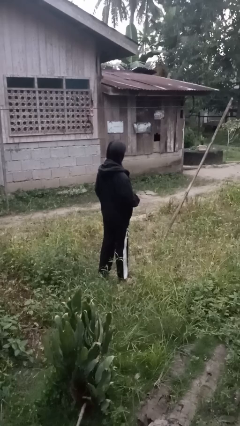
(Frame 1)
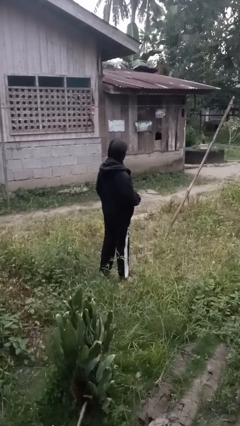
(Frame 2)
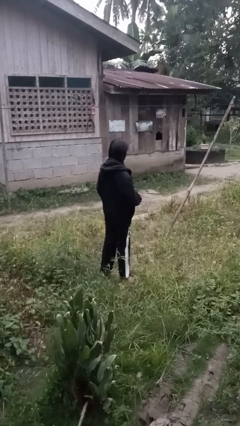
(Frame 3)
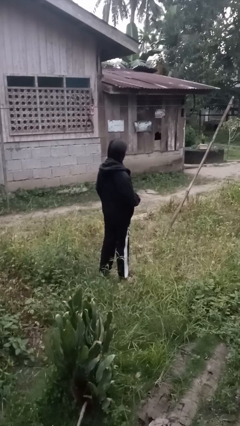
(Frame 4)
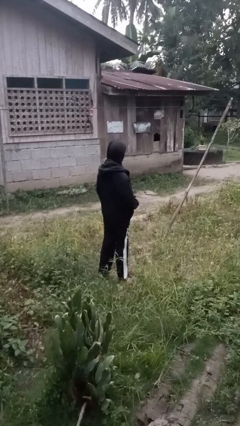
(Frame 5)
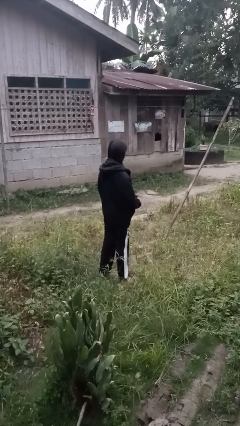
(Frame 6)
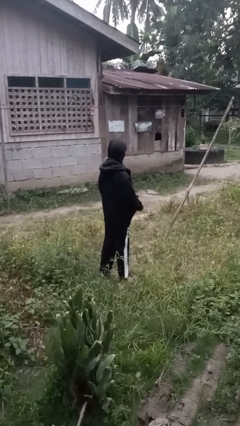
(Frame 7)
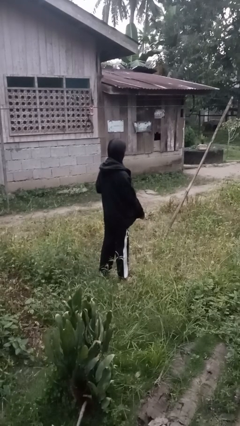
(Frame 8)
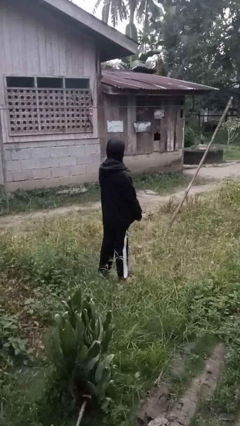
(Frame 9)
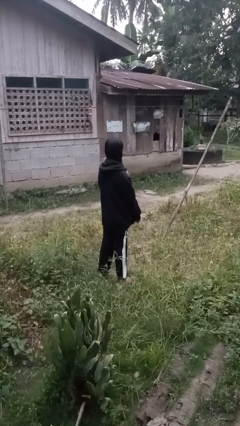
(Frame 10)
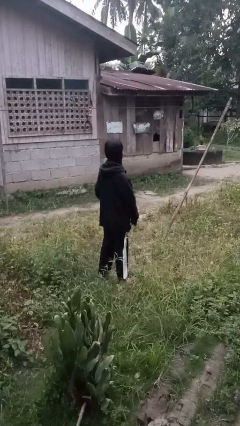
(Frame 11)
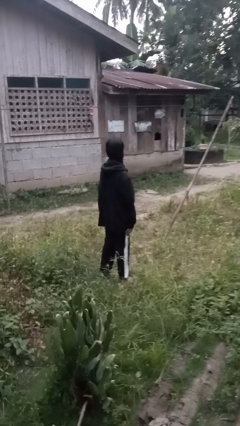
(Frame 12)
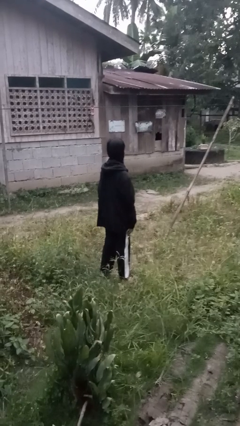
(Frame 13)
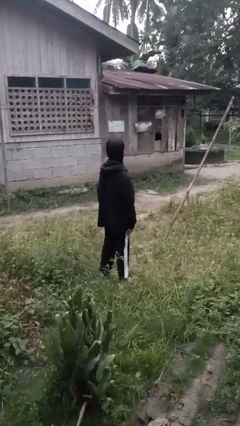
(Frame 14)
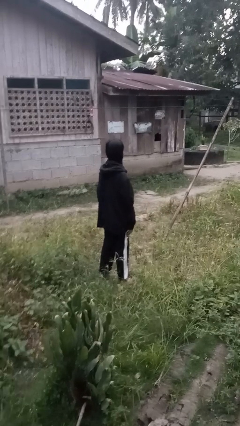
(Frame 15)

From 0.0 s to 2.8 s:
person zips up jacket

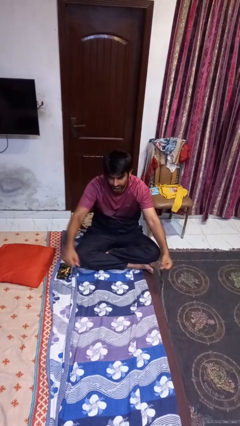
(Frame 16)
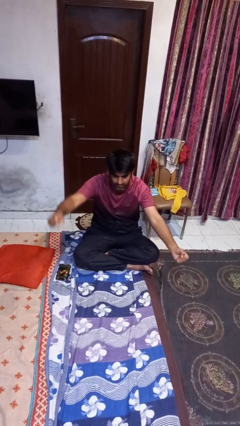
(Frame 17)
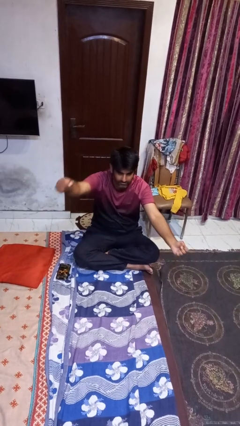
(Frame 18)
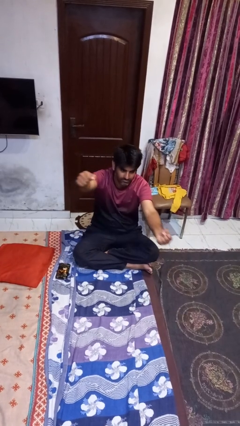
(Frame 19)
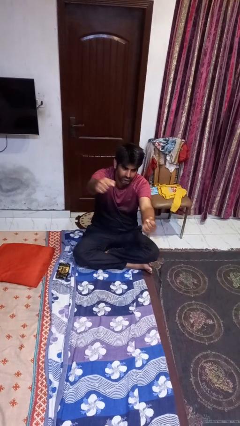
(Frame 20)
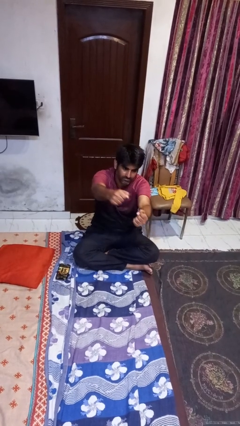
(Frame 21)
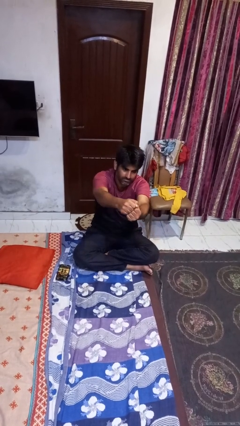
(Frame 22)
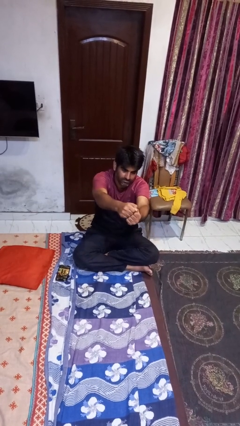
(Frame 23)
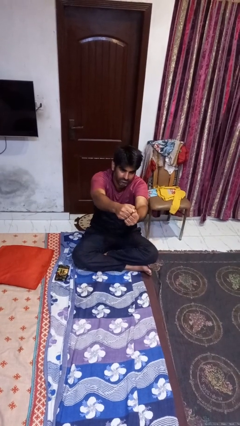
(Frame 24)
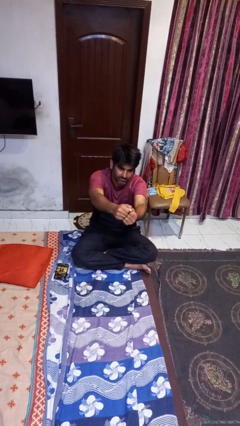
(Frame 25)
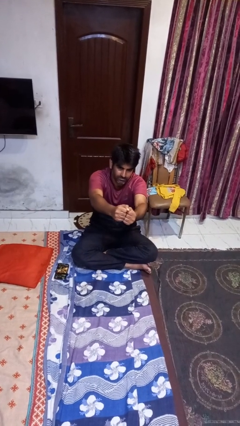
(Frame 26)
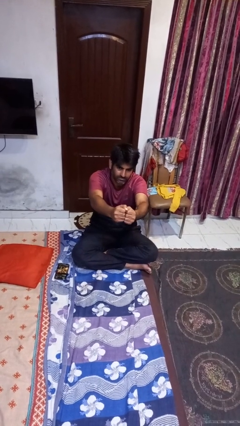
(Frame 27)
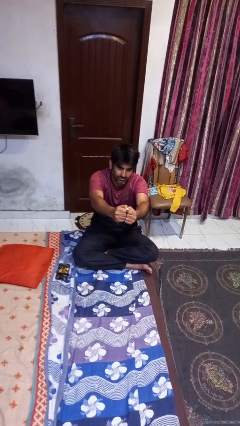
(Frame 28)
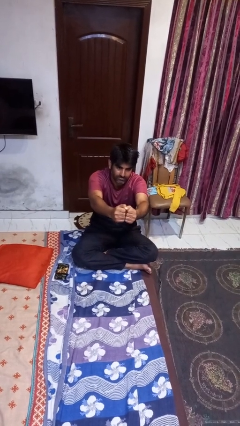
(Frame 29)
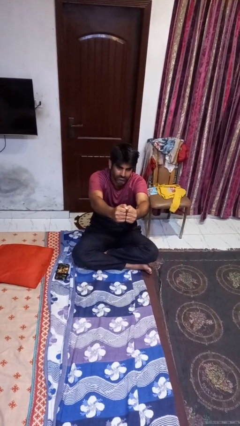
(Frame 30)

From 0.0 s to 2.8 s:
person gestures zoom in

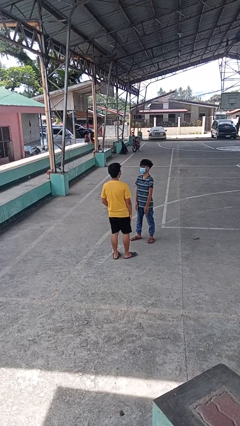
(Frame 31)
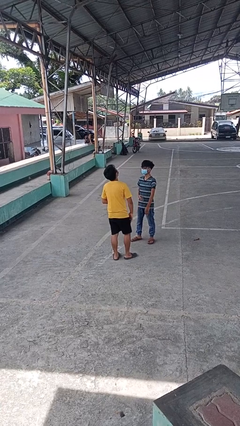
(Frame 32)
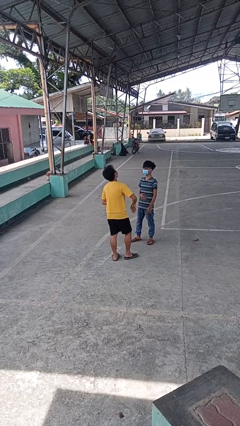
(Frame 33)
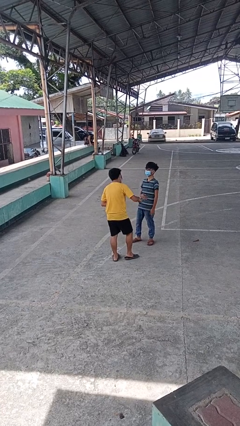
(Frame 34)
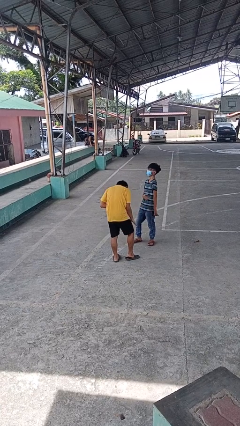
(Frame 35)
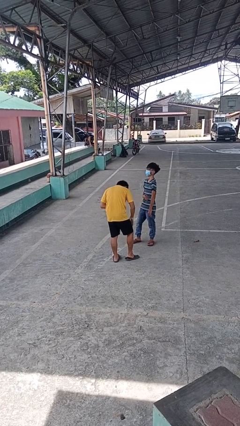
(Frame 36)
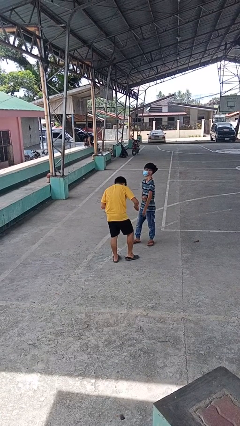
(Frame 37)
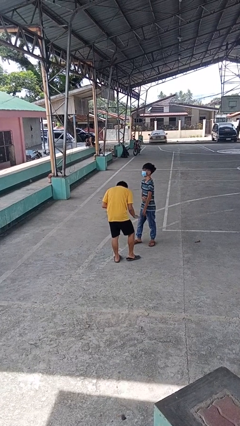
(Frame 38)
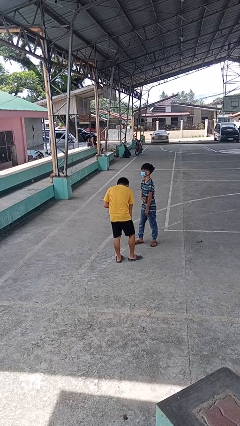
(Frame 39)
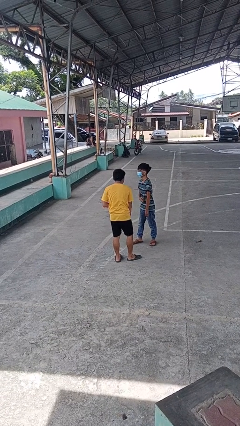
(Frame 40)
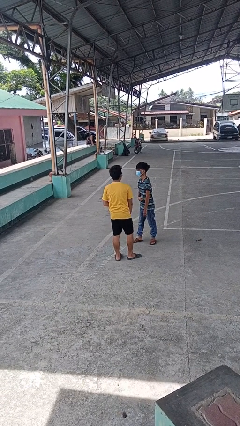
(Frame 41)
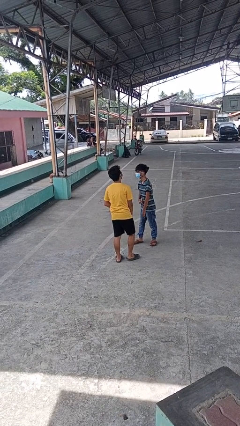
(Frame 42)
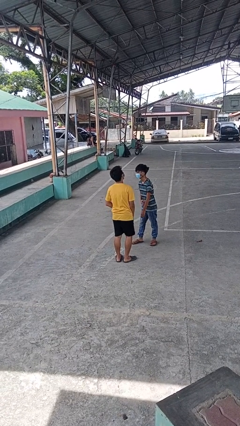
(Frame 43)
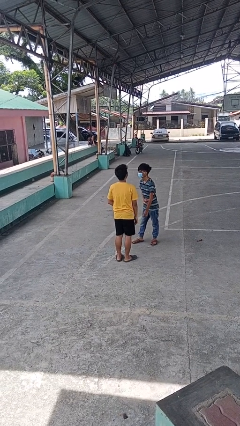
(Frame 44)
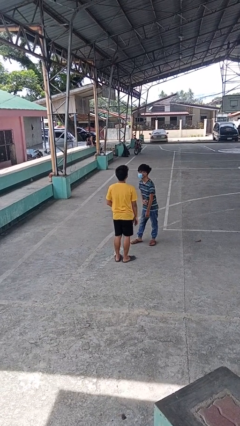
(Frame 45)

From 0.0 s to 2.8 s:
person laughs with person

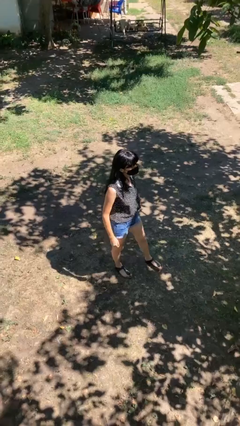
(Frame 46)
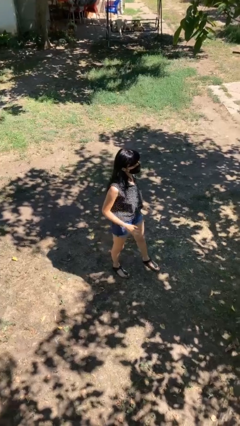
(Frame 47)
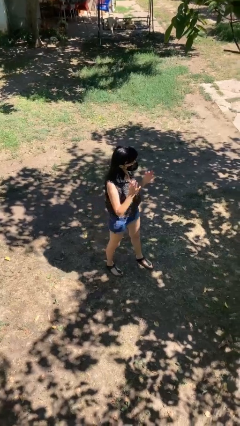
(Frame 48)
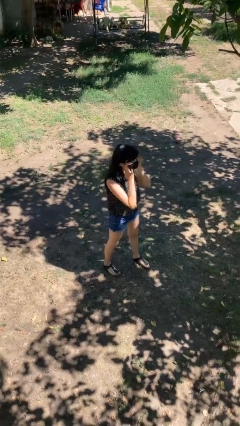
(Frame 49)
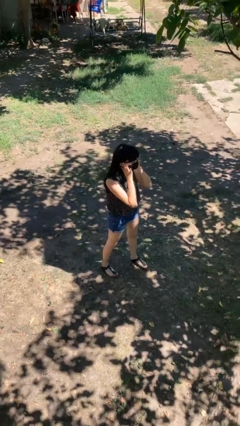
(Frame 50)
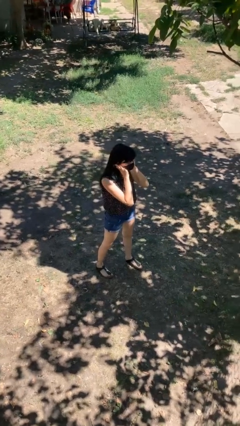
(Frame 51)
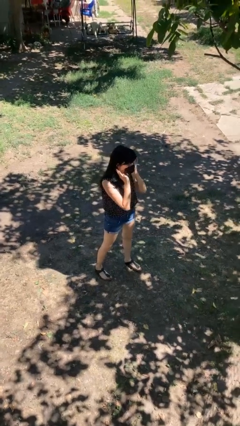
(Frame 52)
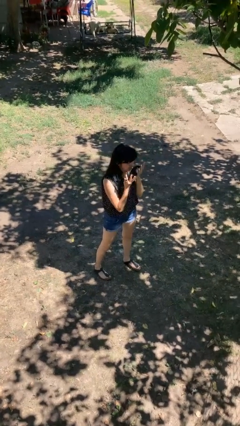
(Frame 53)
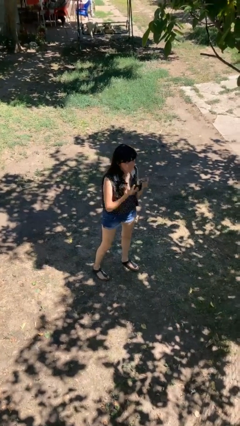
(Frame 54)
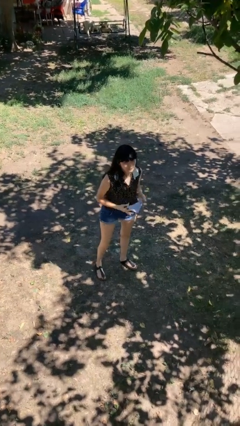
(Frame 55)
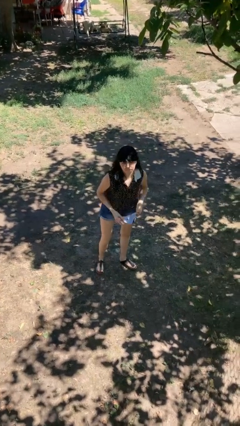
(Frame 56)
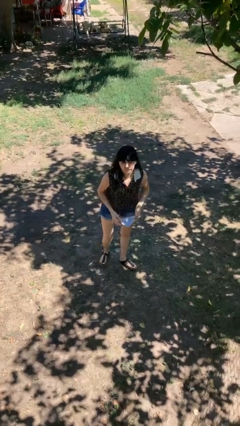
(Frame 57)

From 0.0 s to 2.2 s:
person takes off facemask

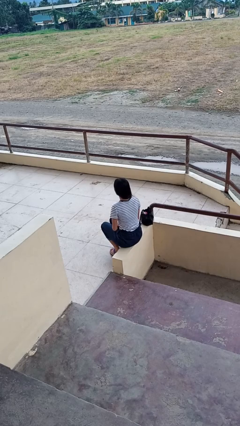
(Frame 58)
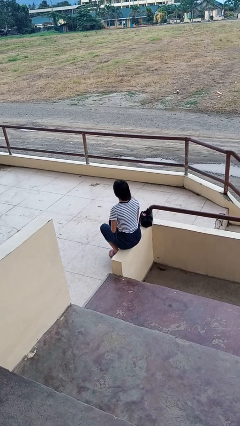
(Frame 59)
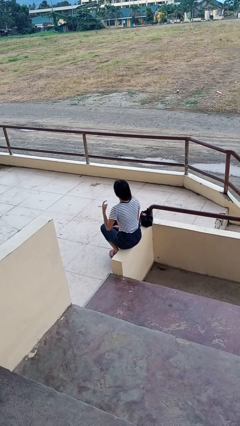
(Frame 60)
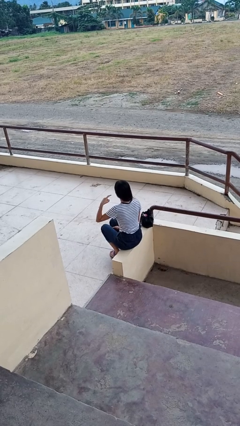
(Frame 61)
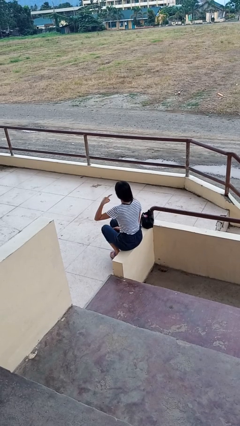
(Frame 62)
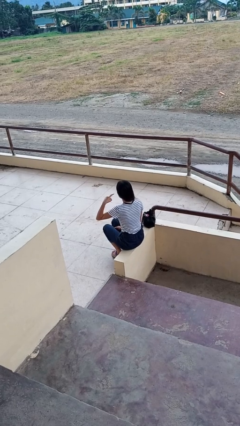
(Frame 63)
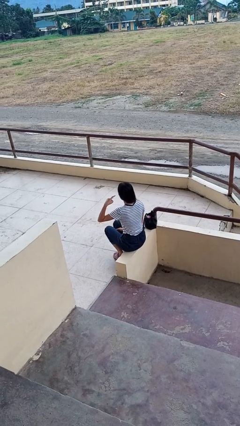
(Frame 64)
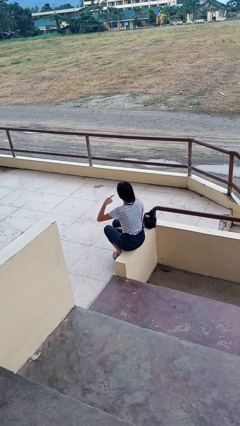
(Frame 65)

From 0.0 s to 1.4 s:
person gestures listen closely

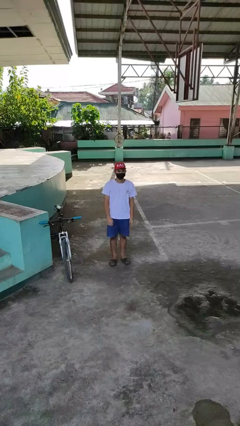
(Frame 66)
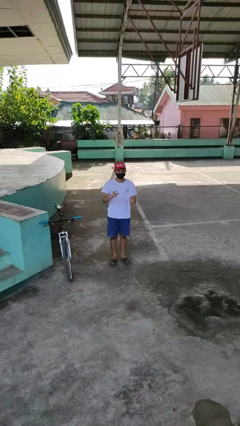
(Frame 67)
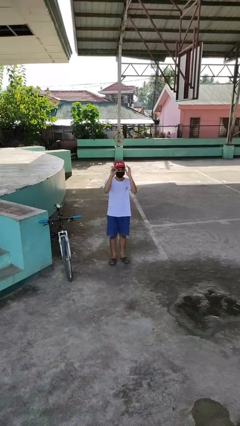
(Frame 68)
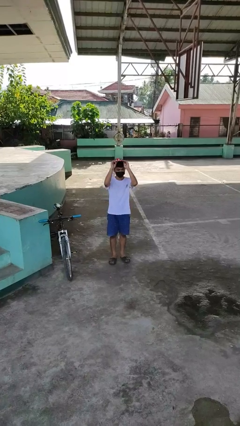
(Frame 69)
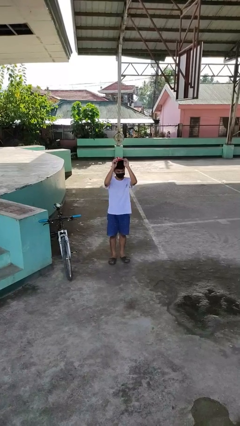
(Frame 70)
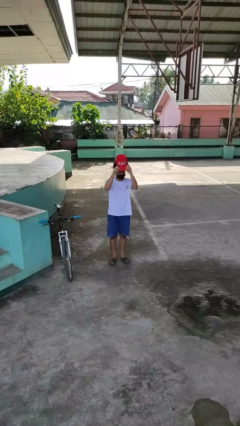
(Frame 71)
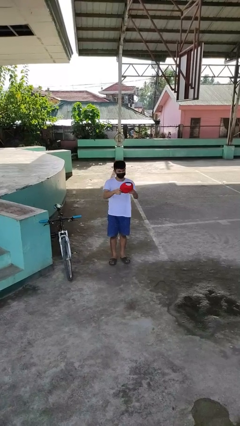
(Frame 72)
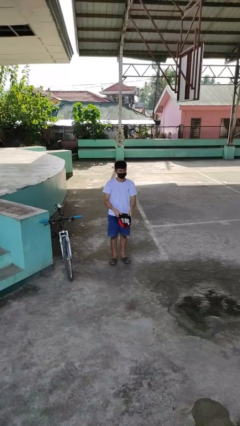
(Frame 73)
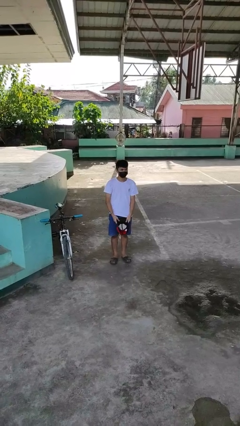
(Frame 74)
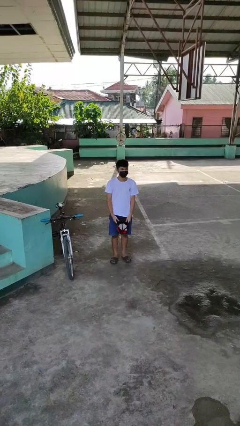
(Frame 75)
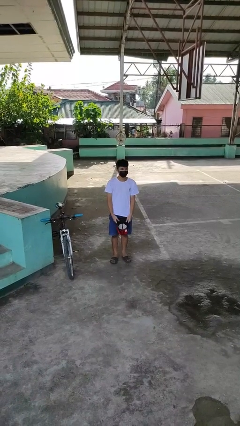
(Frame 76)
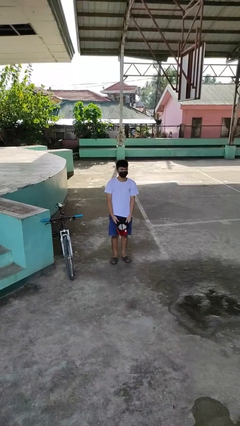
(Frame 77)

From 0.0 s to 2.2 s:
person takes off hat

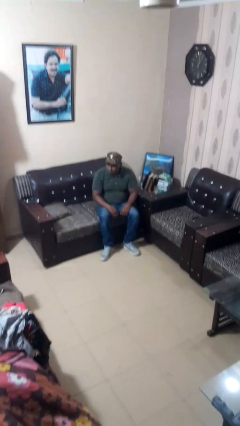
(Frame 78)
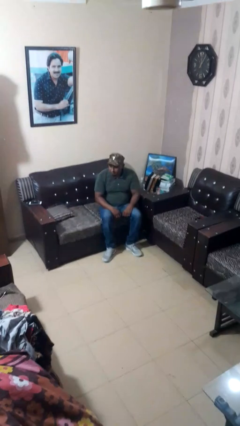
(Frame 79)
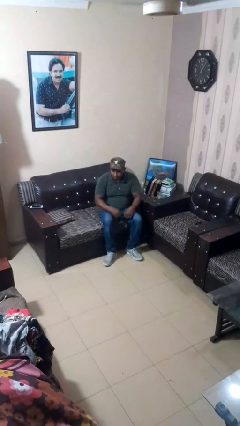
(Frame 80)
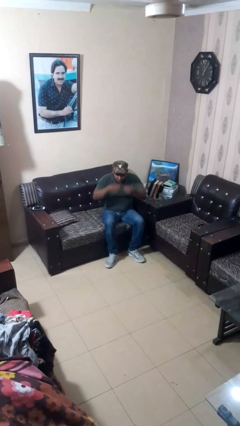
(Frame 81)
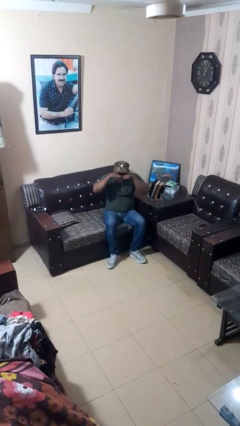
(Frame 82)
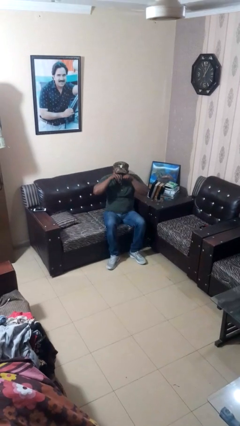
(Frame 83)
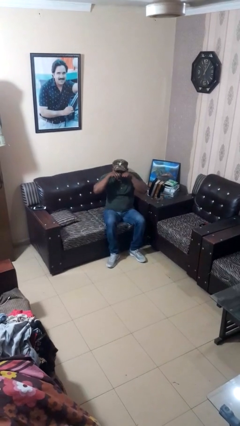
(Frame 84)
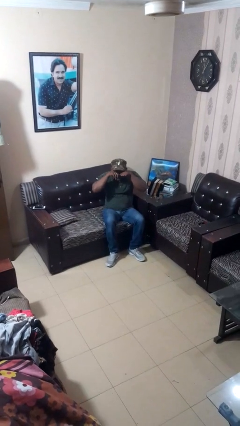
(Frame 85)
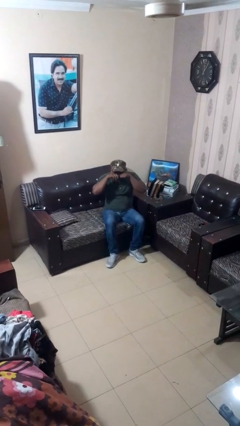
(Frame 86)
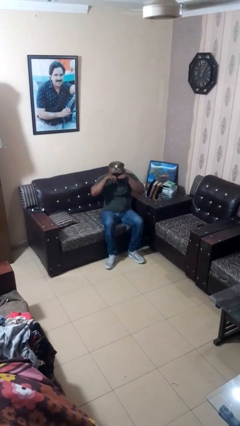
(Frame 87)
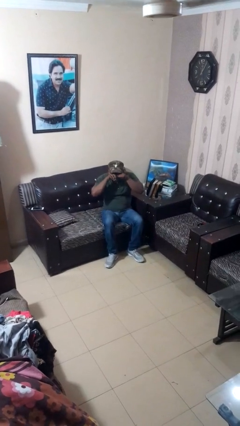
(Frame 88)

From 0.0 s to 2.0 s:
person rubs eyes

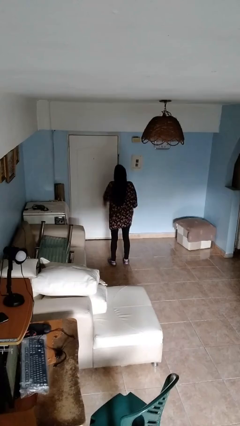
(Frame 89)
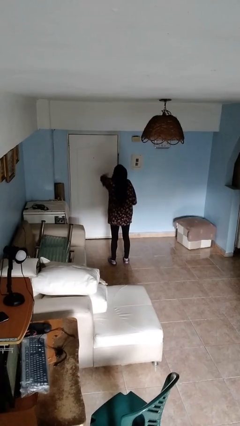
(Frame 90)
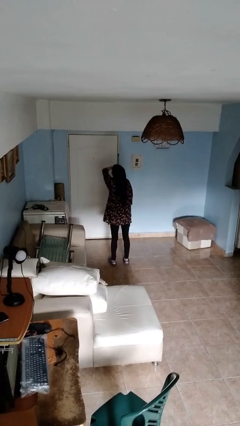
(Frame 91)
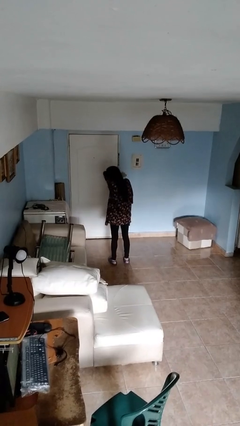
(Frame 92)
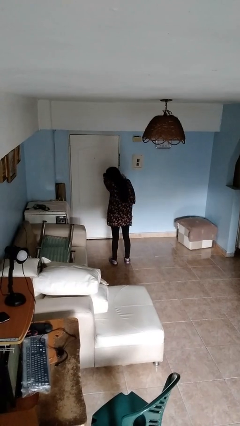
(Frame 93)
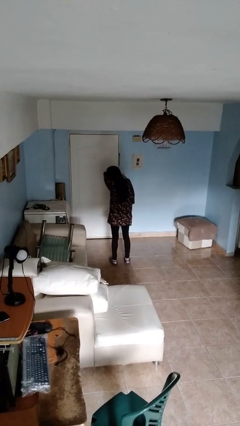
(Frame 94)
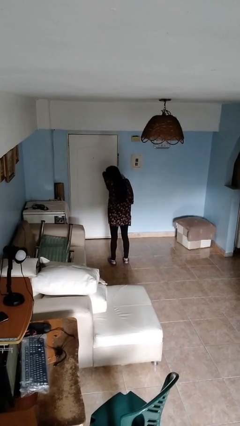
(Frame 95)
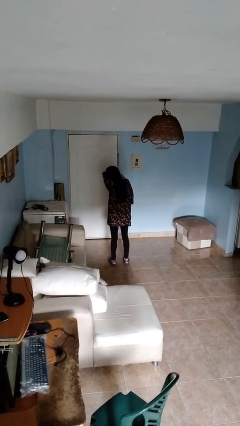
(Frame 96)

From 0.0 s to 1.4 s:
person sneezes into arm
